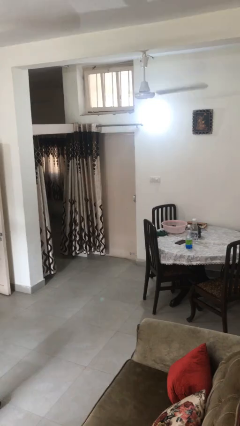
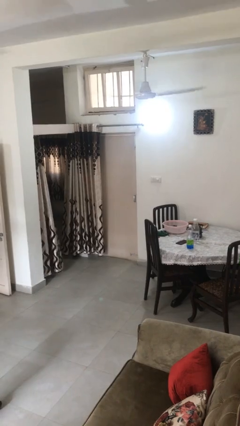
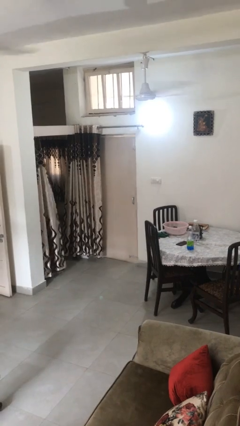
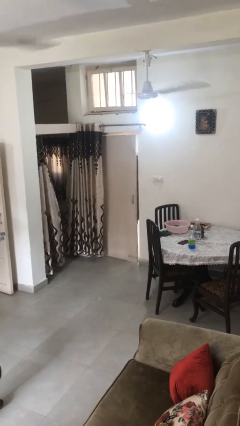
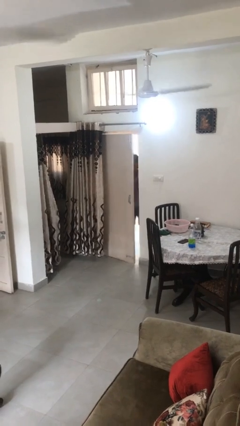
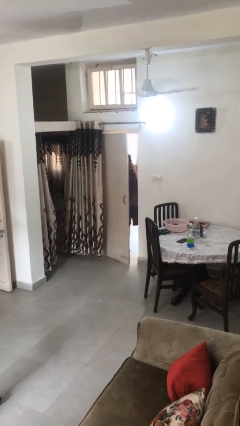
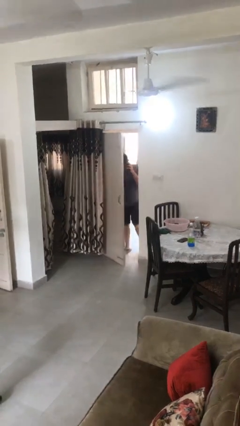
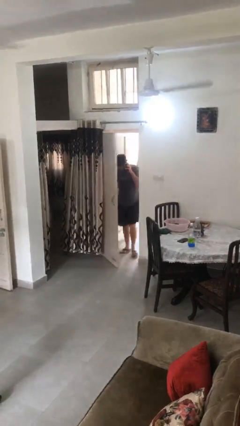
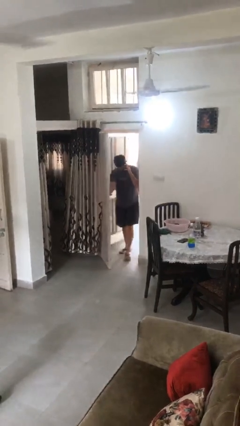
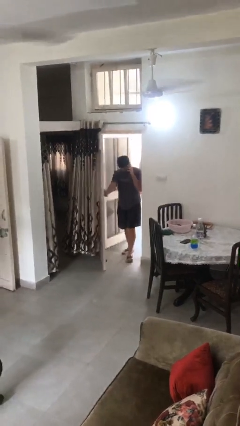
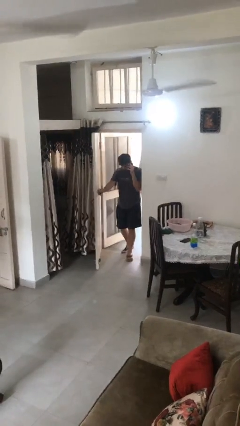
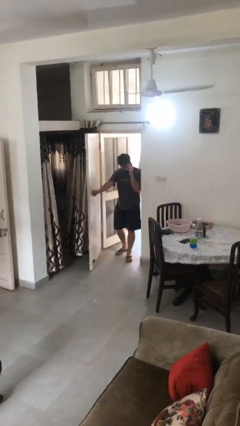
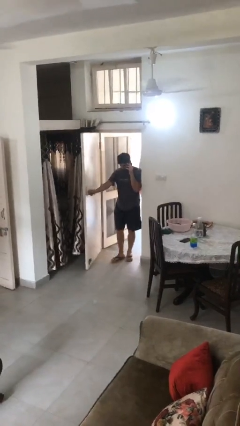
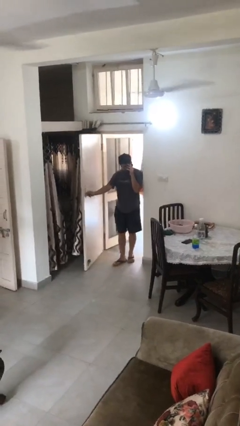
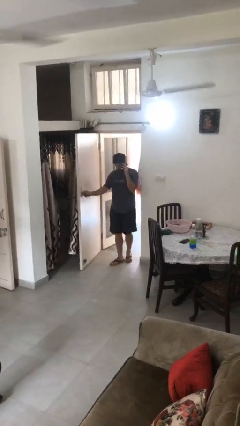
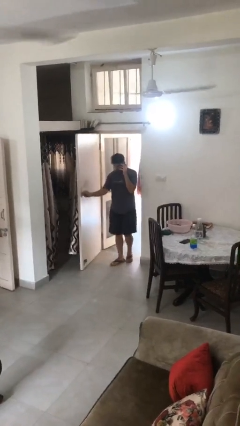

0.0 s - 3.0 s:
person opens facility door

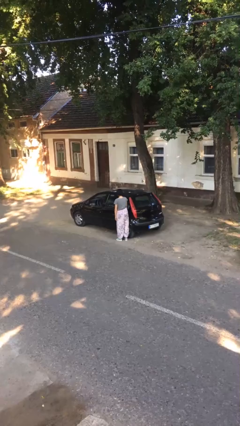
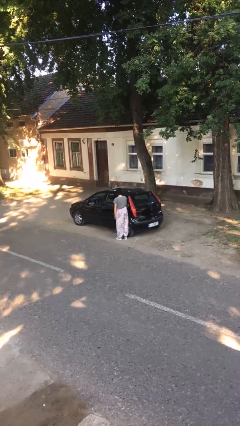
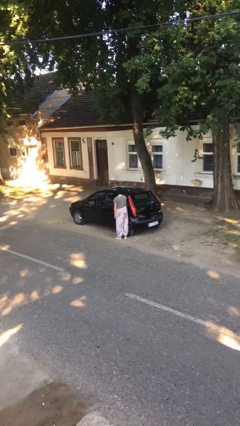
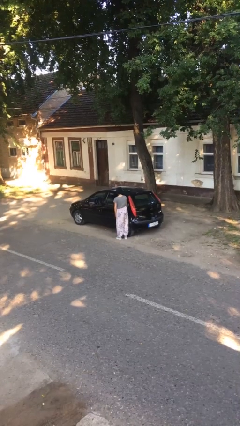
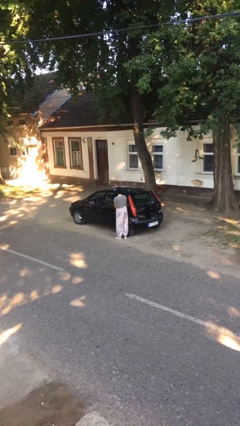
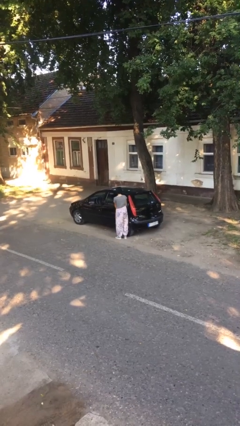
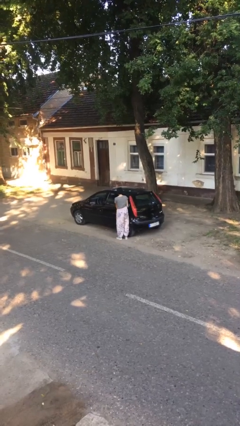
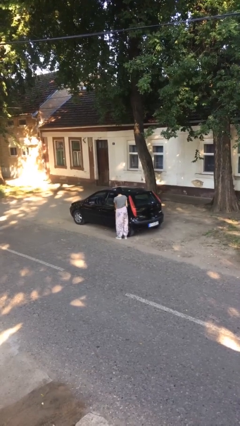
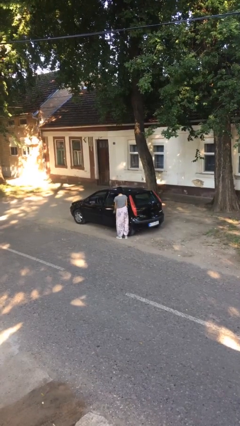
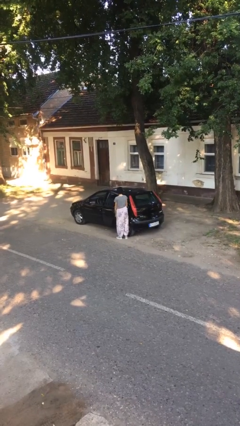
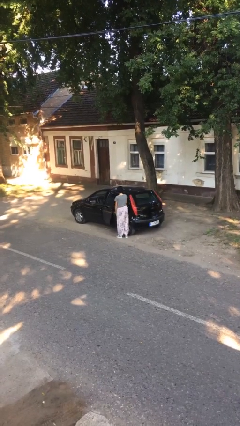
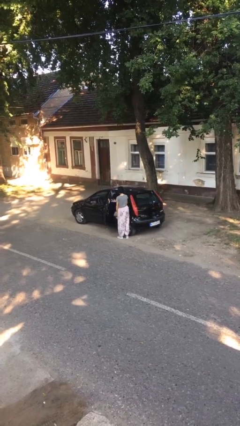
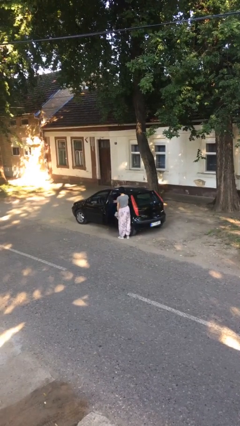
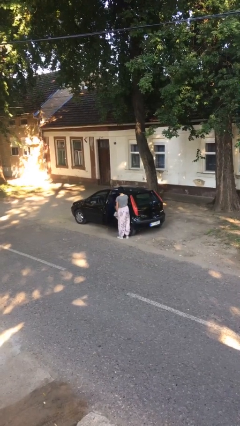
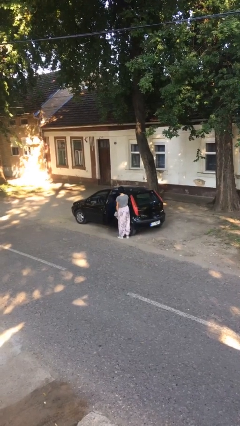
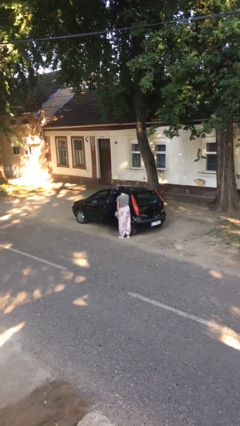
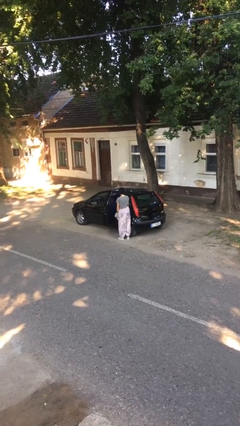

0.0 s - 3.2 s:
person opens car door

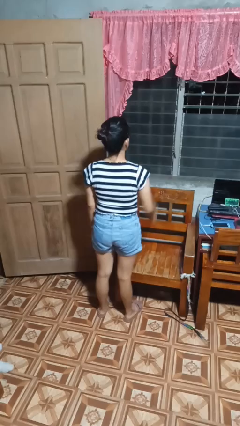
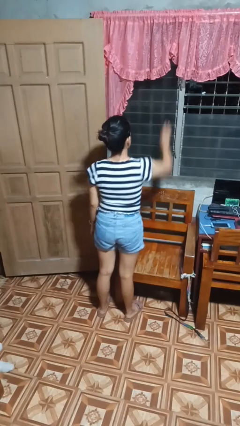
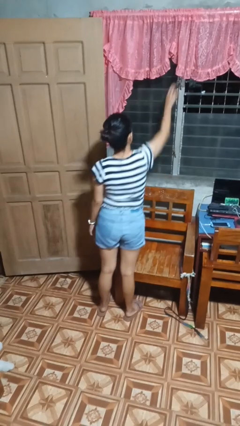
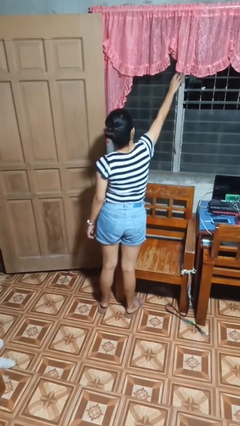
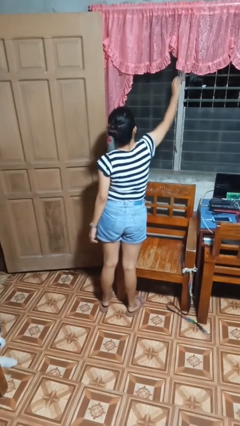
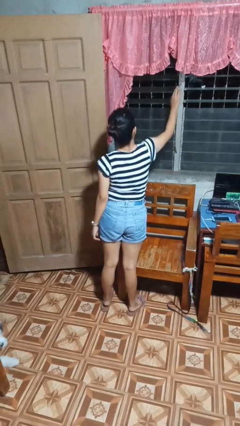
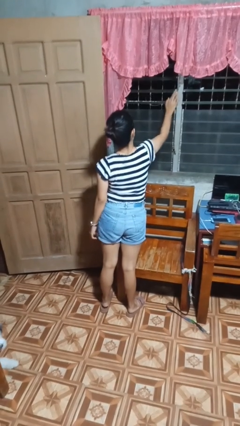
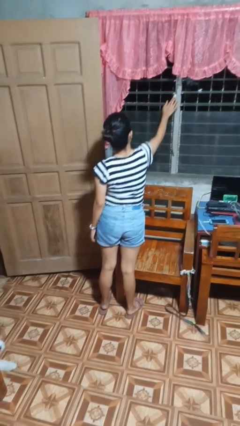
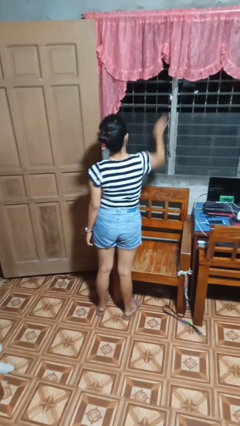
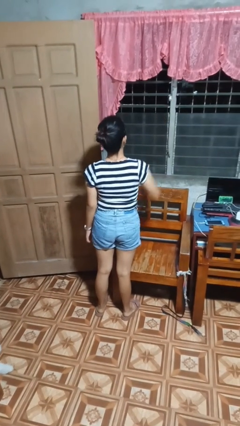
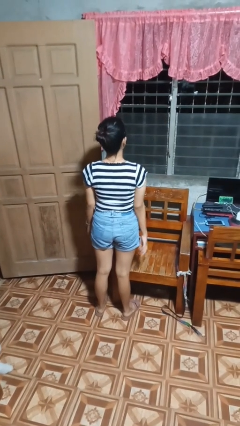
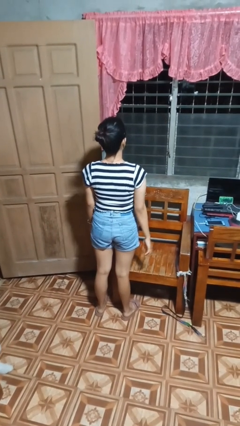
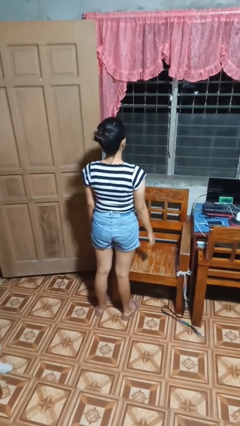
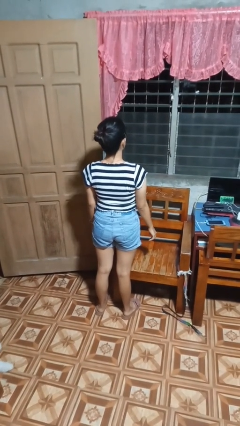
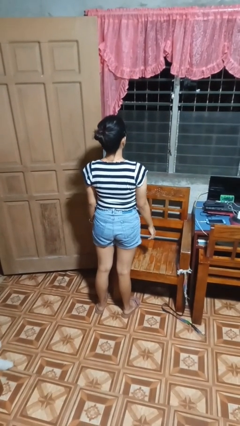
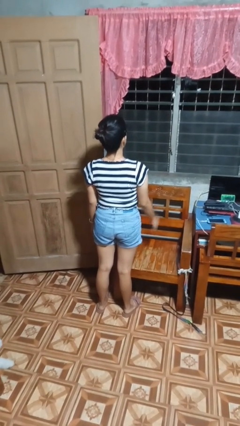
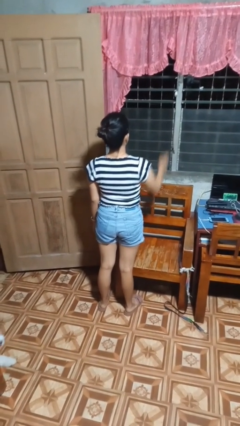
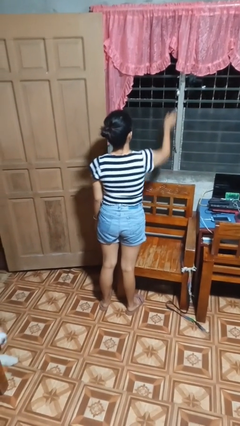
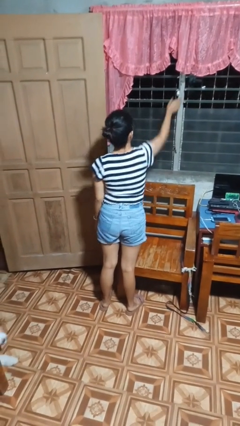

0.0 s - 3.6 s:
person opens home window

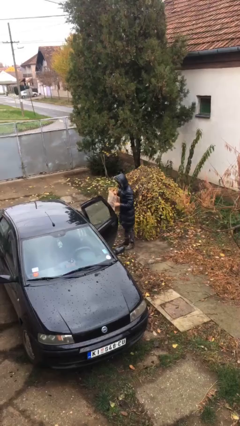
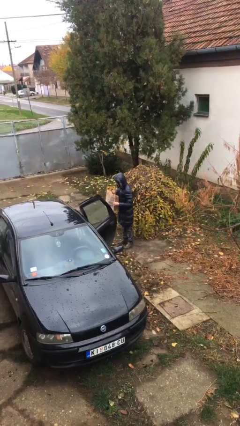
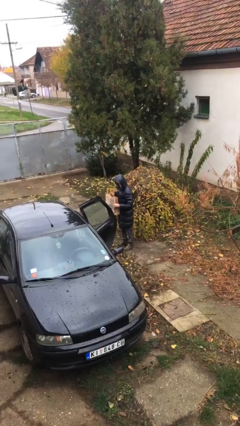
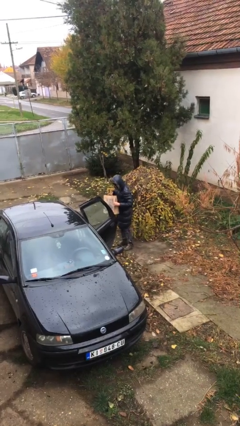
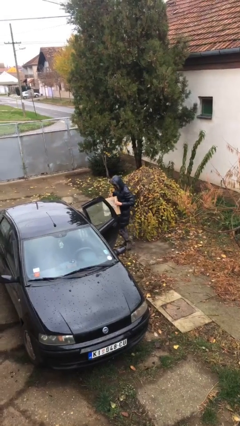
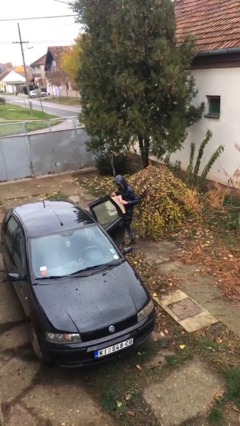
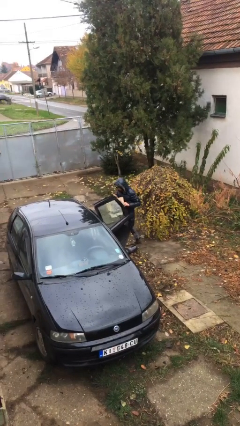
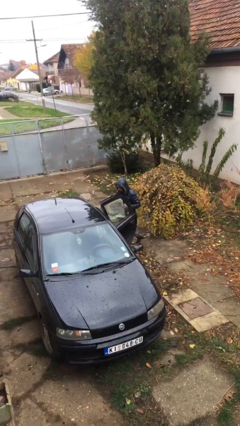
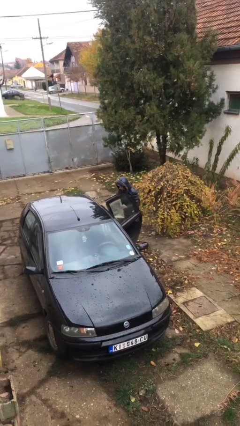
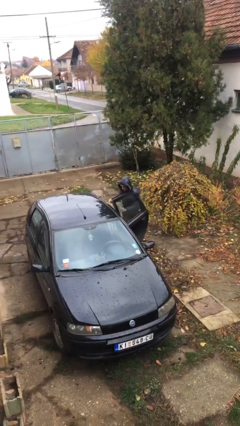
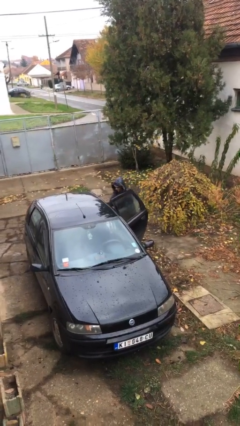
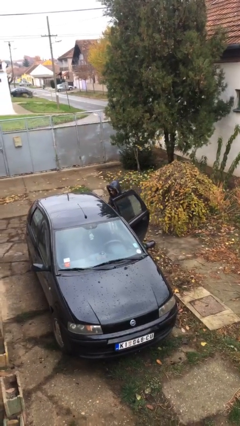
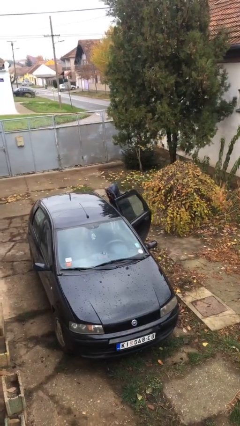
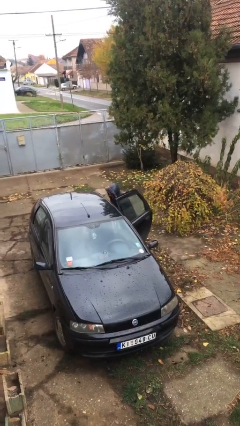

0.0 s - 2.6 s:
person loads car

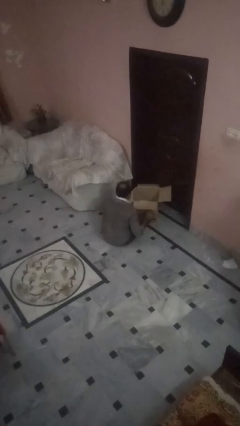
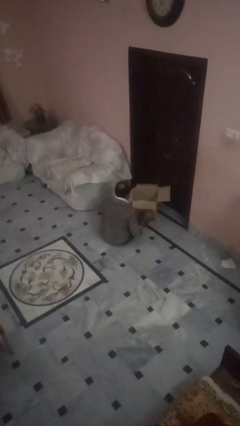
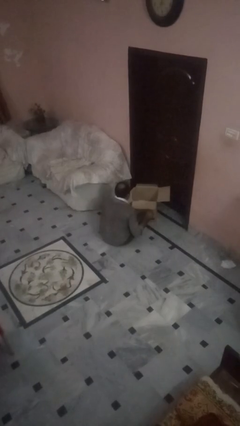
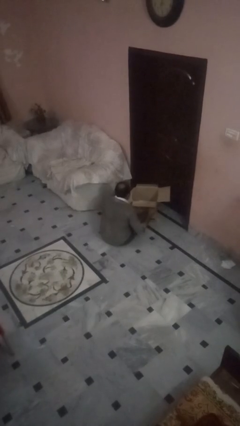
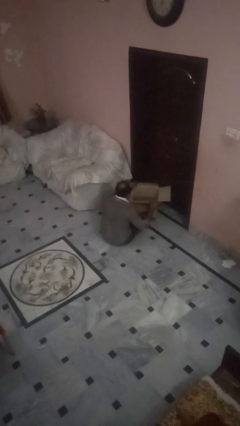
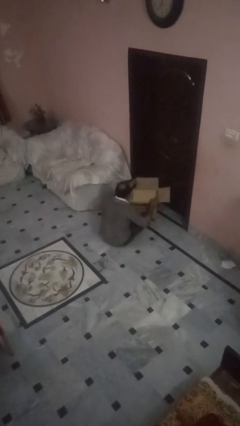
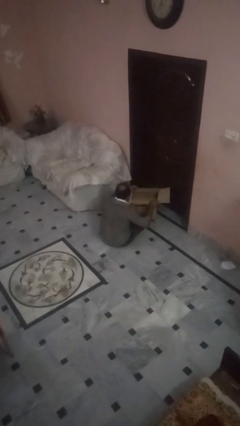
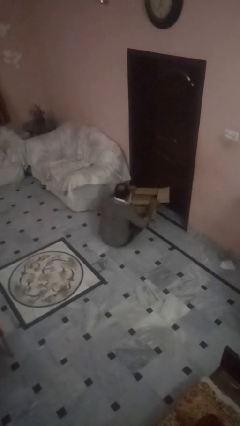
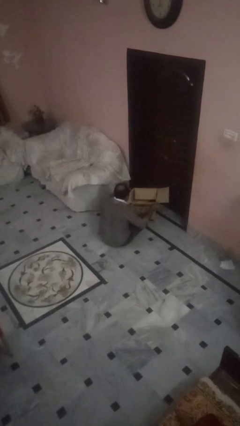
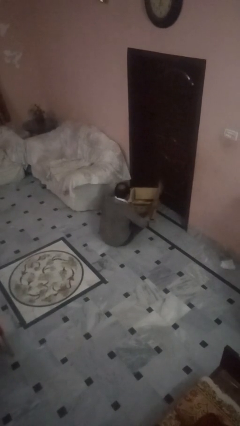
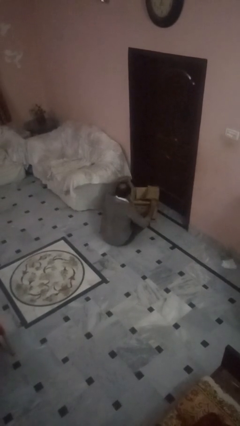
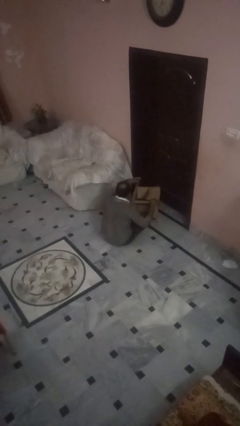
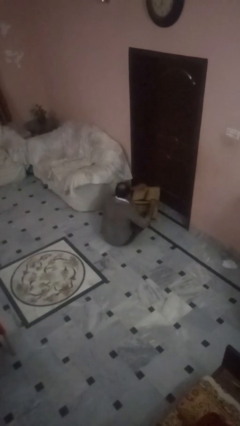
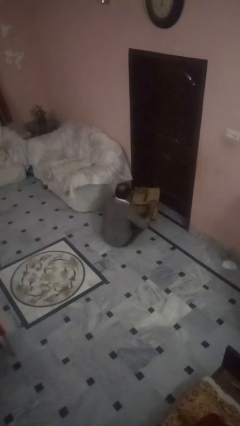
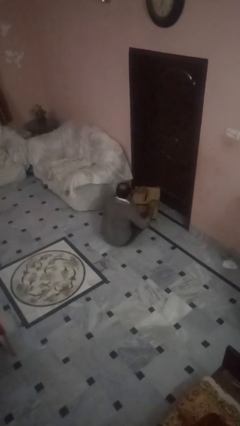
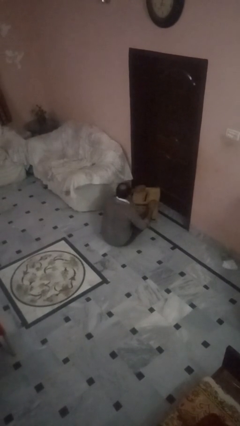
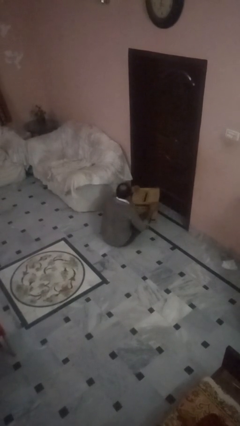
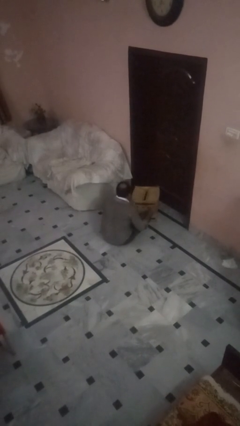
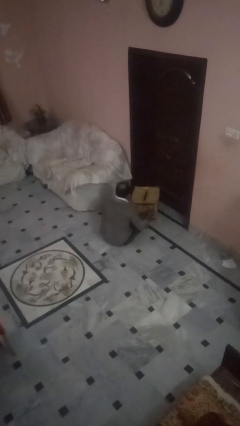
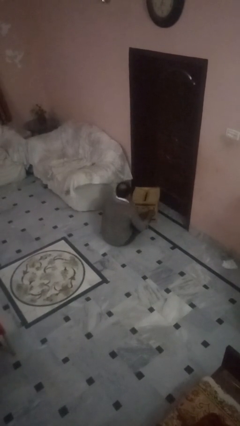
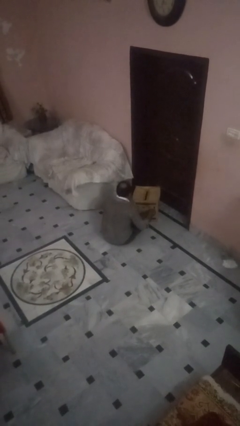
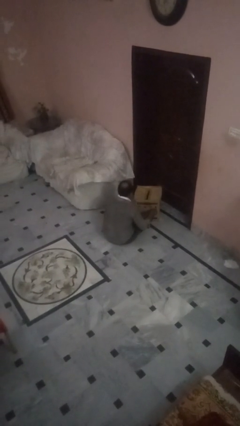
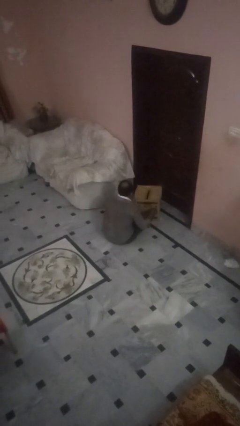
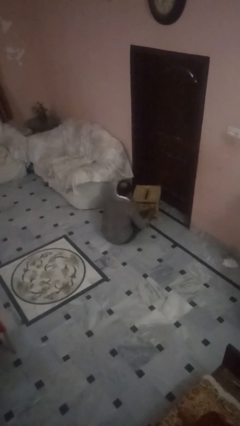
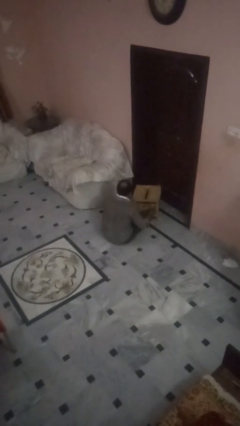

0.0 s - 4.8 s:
person closes box
